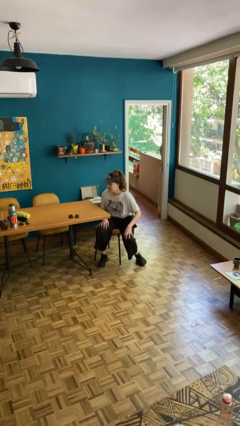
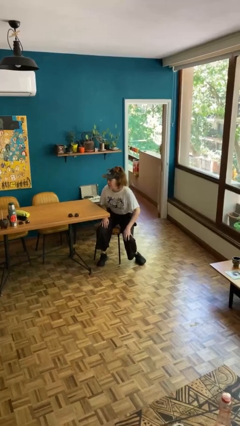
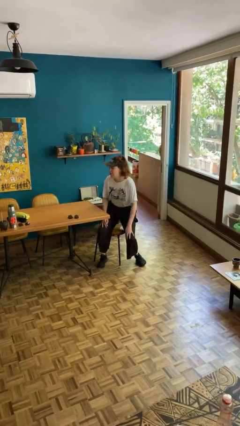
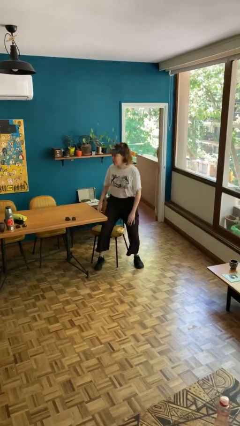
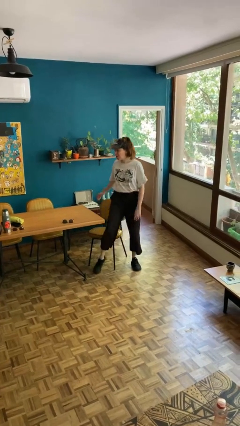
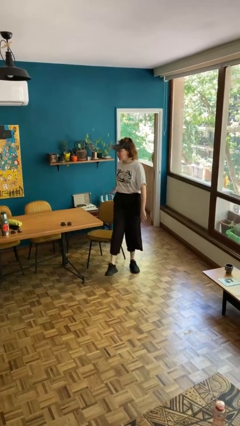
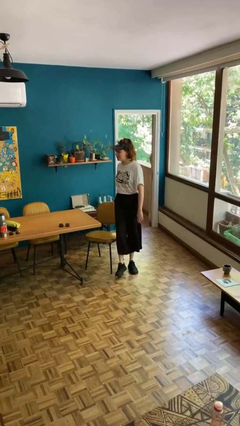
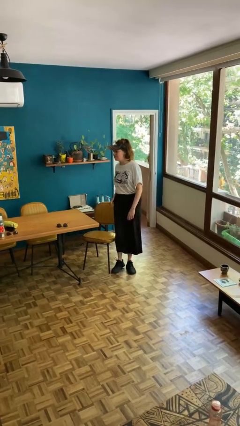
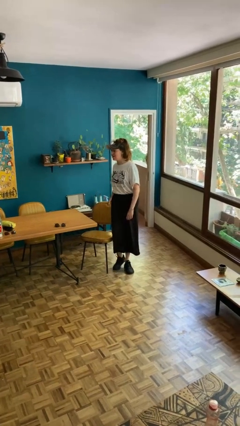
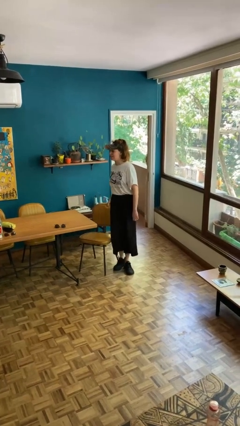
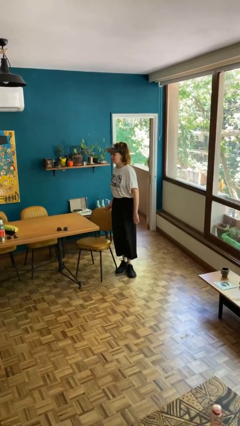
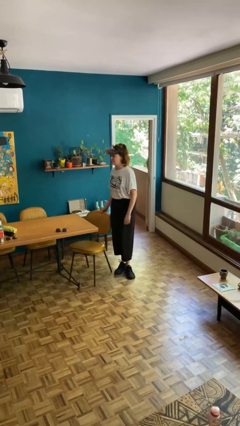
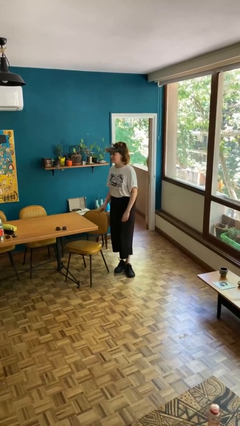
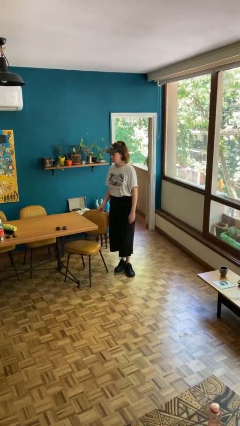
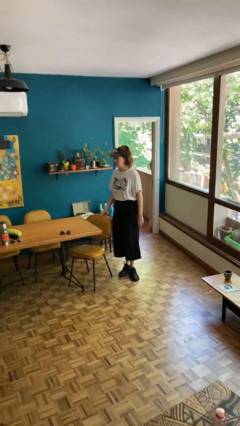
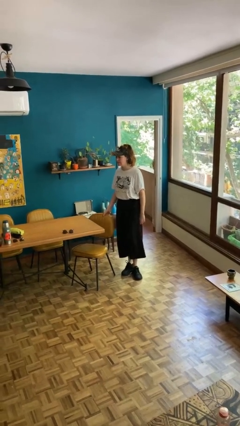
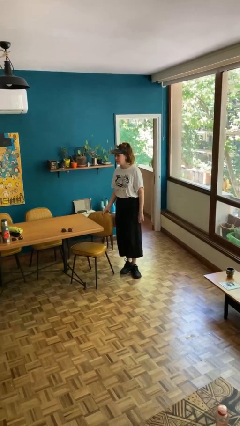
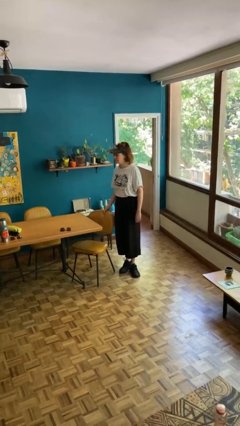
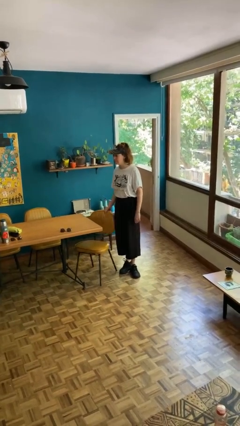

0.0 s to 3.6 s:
person stands up

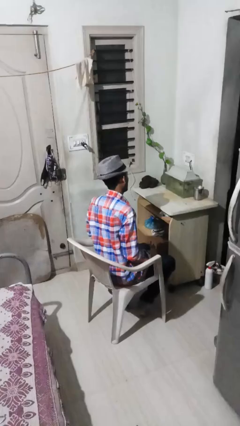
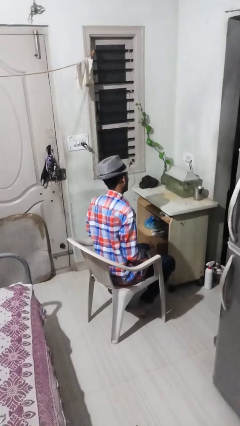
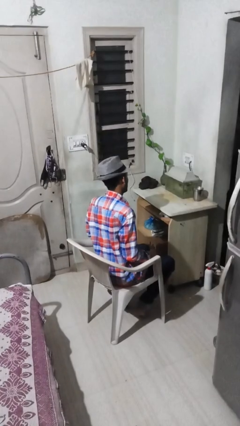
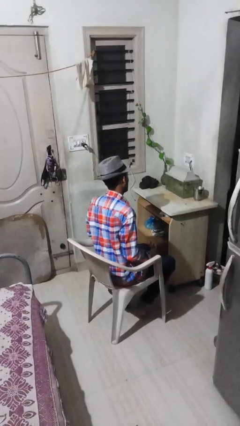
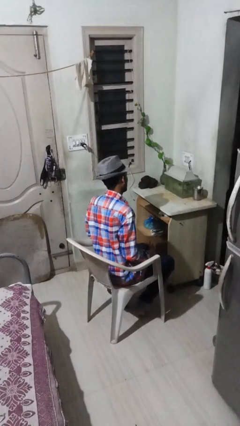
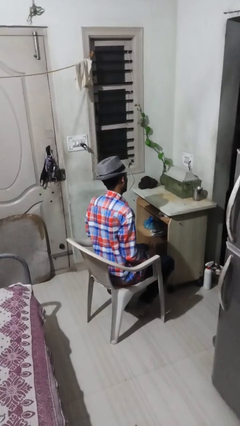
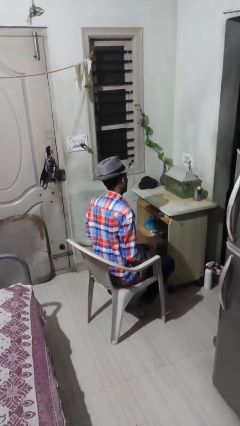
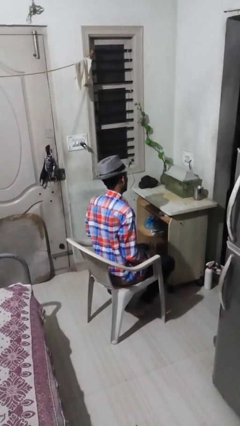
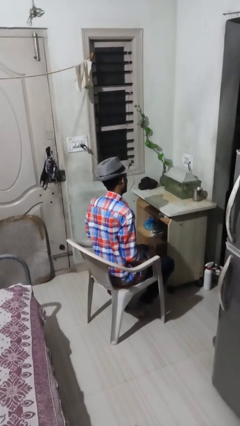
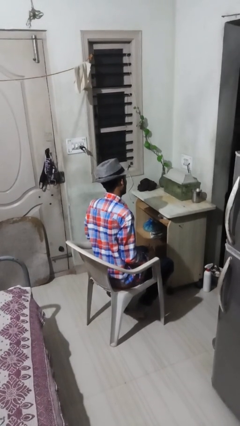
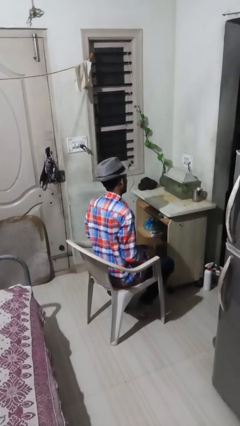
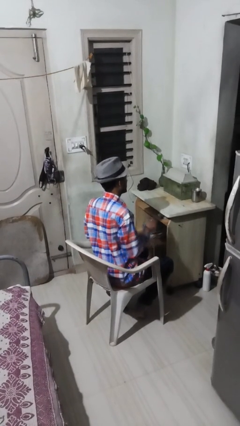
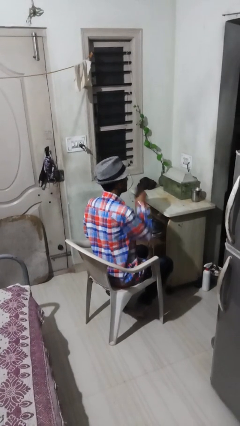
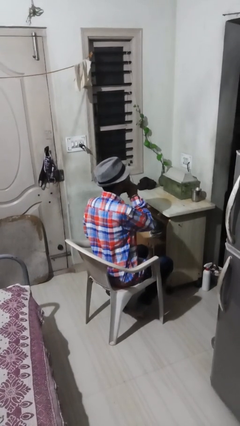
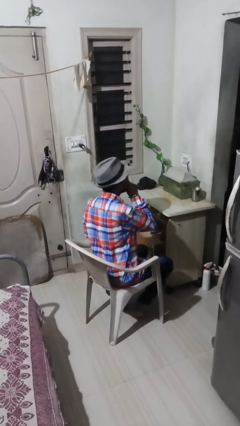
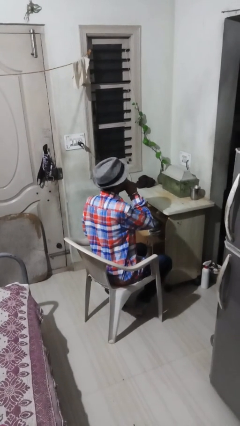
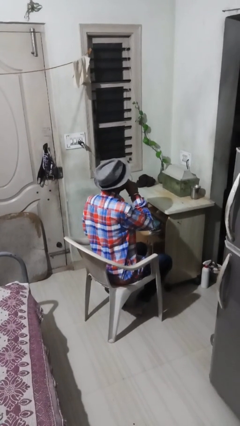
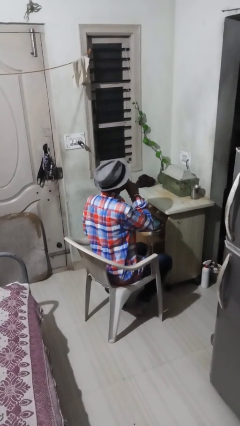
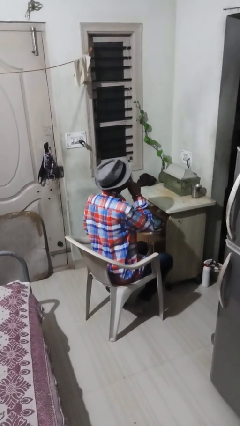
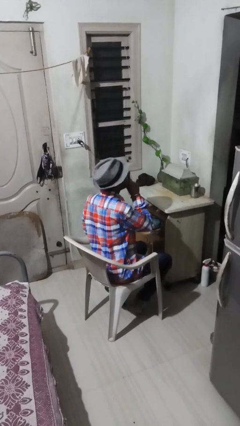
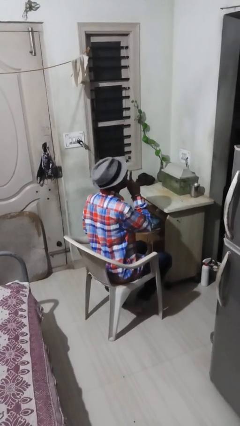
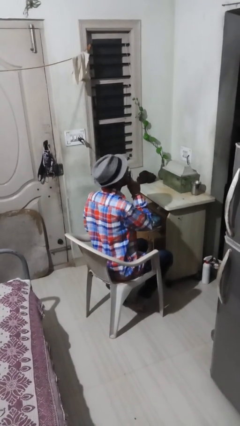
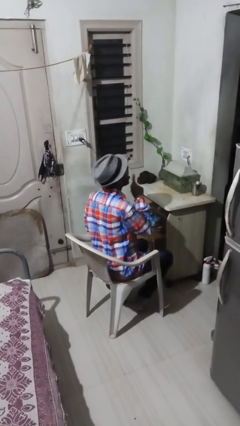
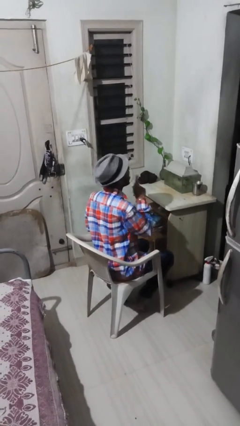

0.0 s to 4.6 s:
person licks fingers

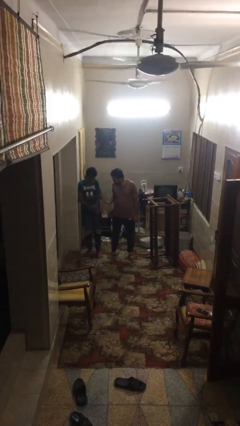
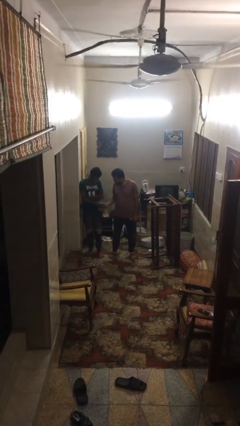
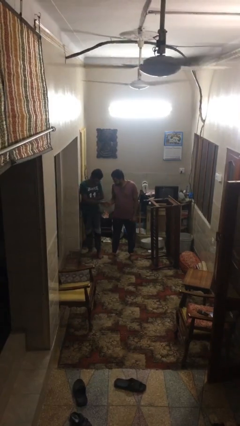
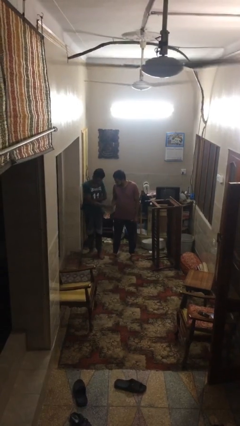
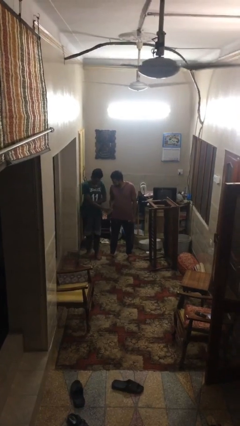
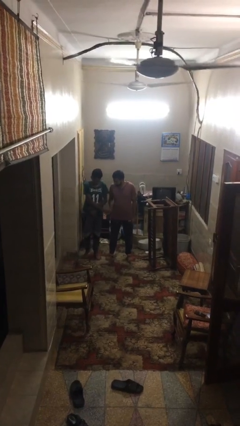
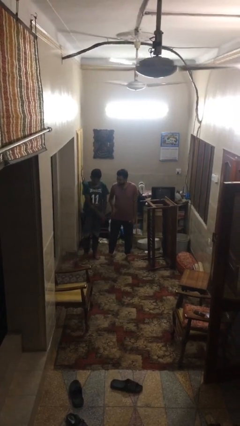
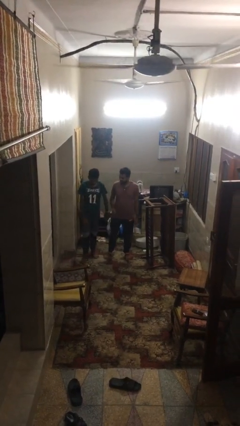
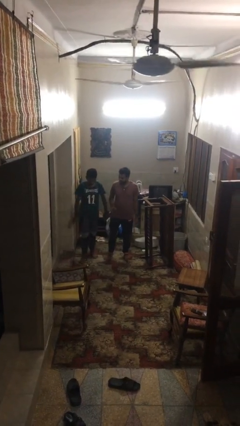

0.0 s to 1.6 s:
person shakes hand

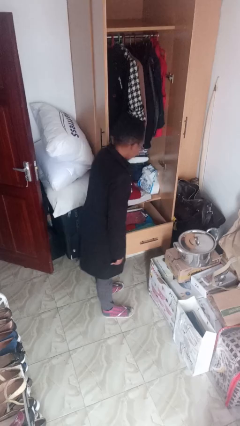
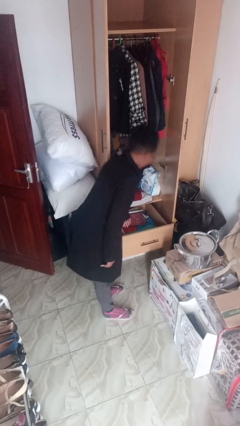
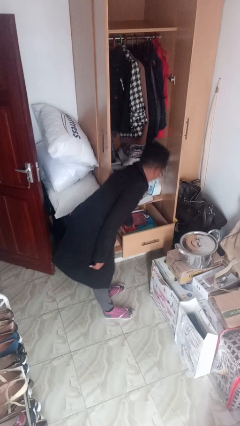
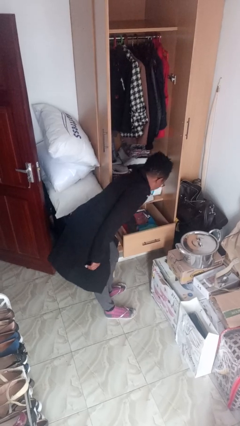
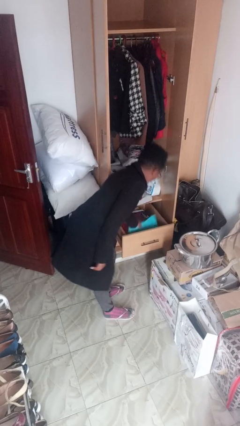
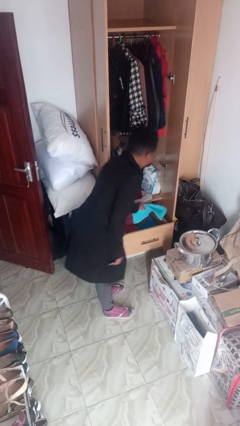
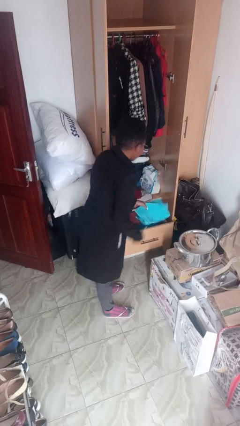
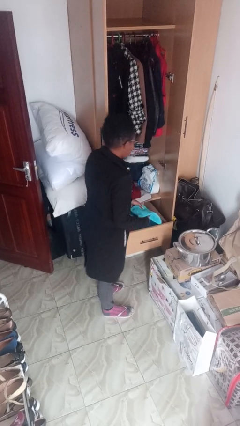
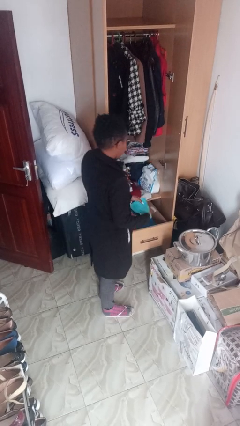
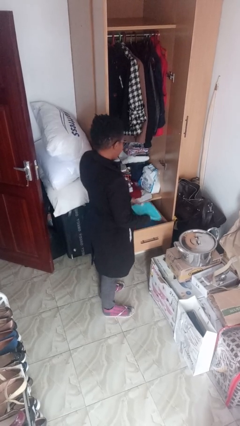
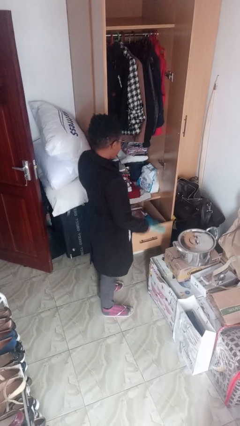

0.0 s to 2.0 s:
person takes clothes from dresser

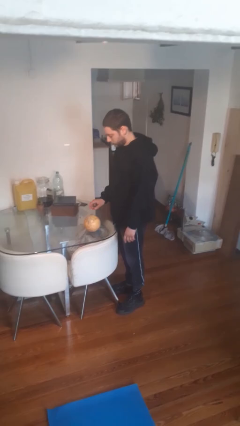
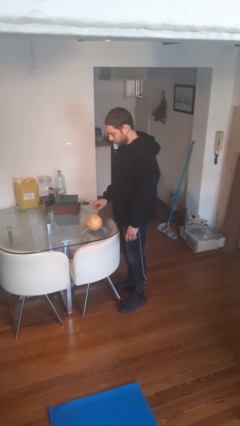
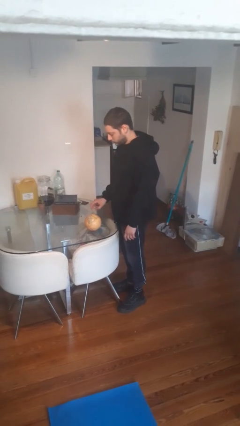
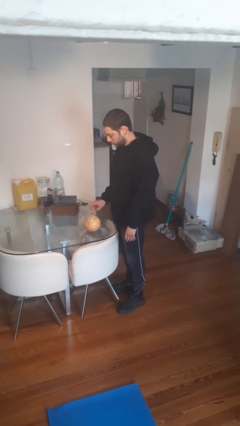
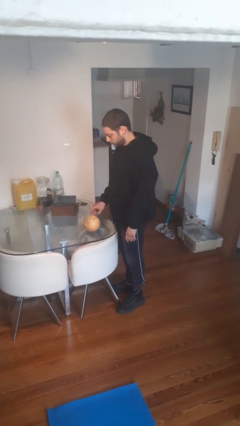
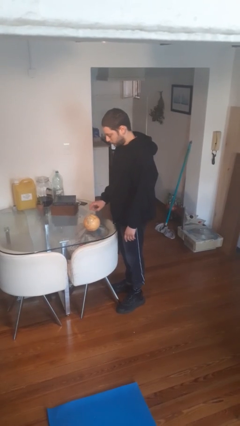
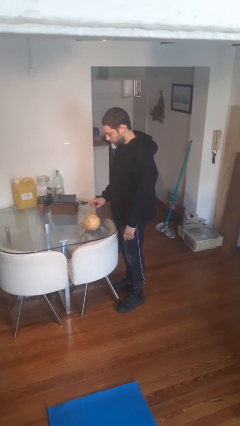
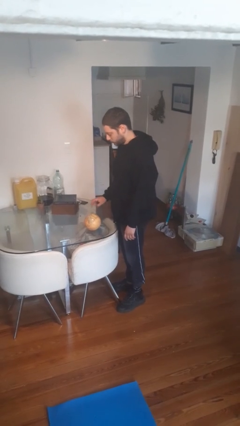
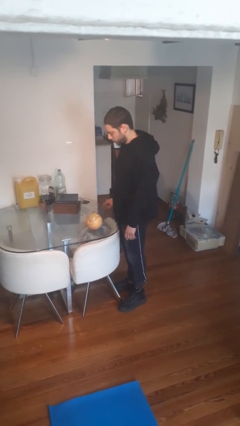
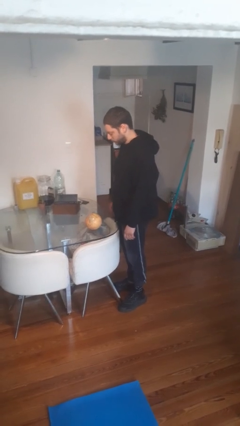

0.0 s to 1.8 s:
person taps object with finger

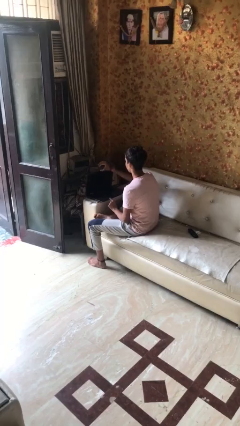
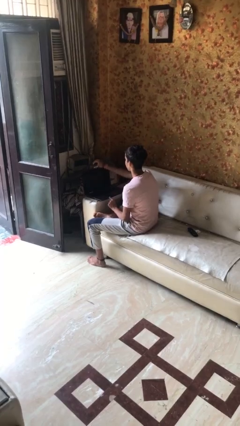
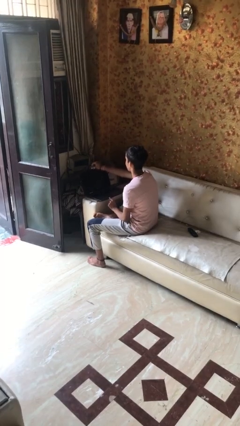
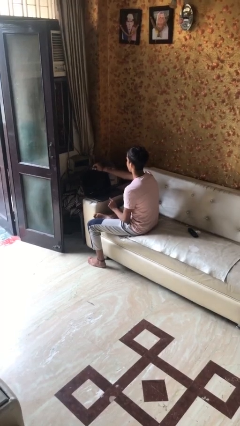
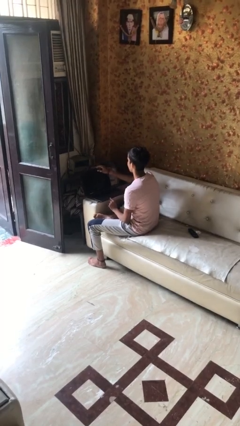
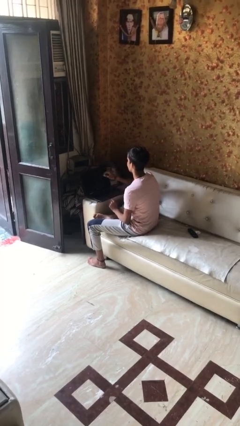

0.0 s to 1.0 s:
person opens laptop

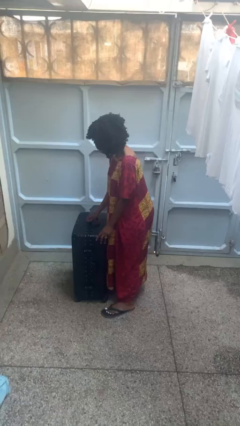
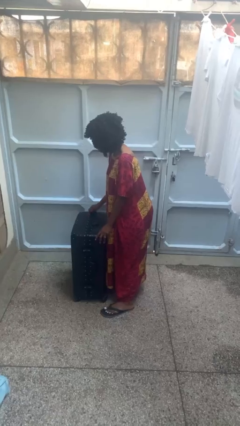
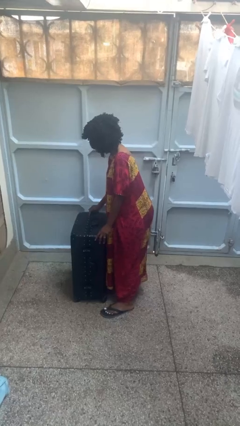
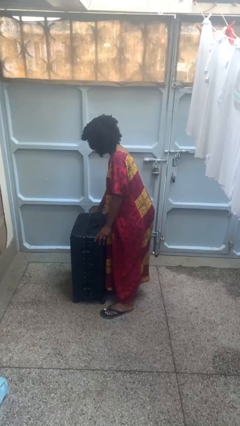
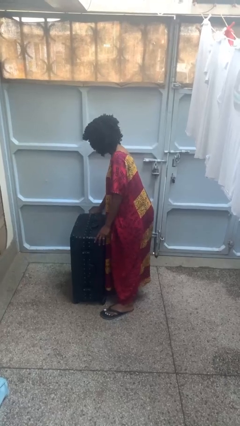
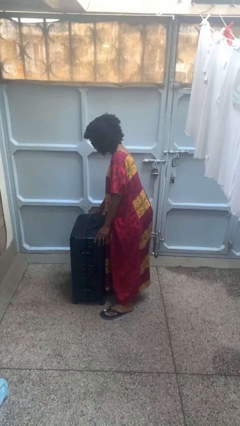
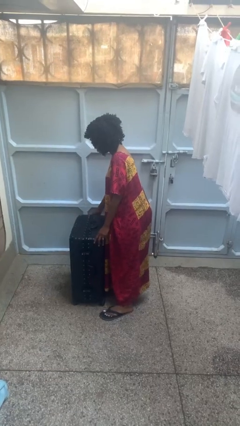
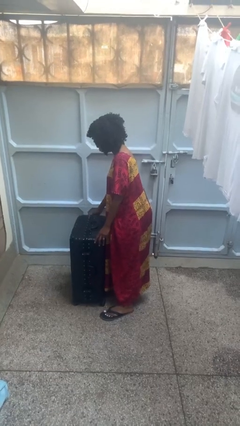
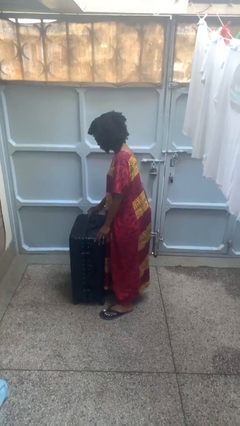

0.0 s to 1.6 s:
person closes suitcase

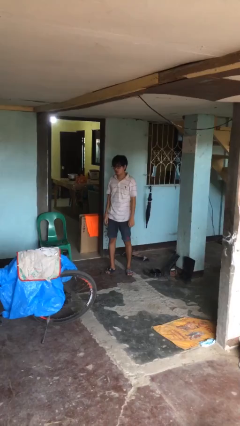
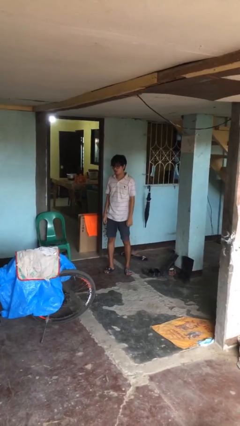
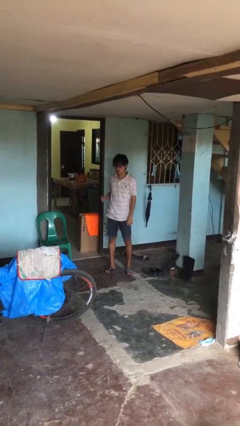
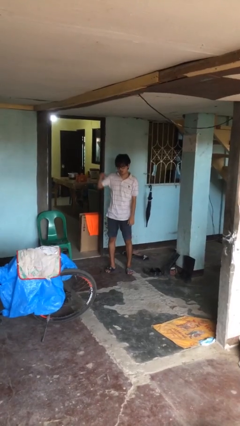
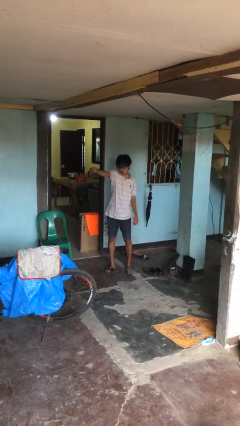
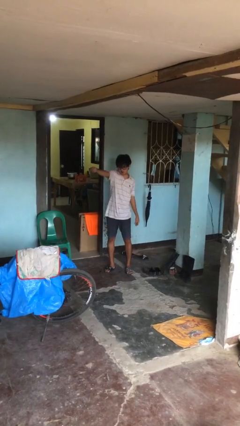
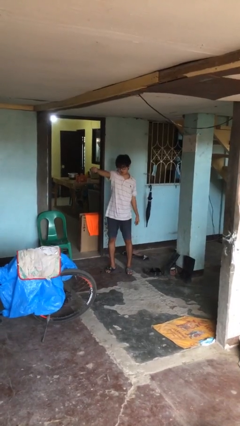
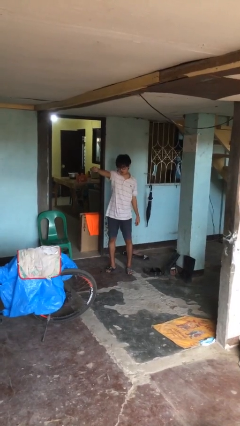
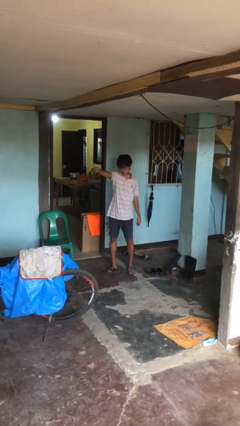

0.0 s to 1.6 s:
person punches
